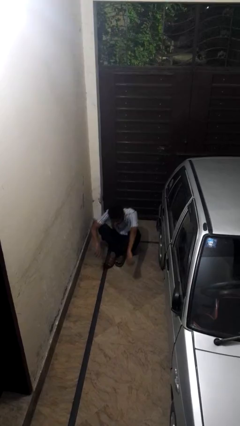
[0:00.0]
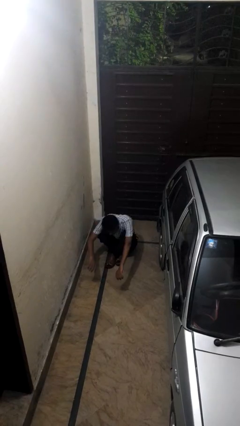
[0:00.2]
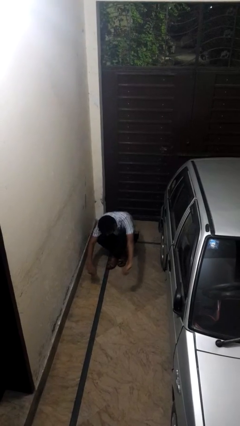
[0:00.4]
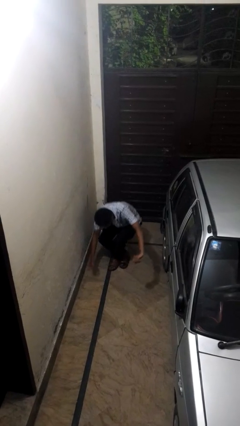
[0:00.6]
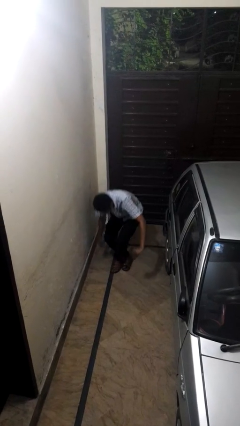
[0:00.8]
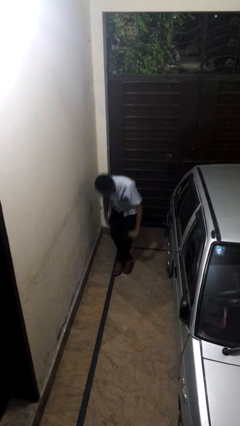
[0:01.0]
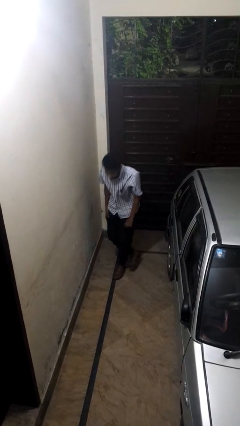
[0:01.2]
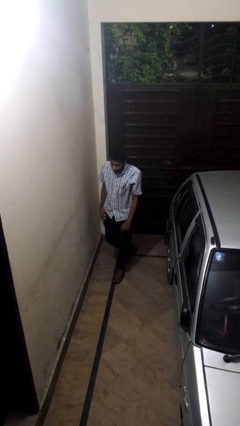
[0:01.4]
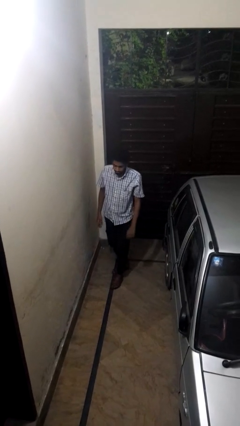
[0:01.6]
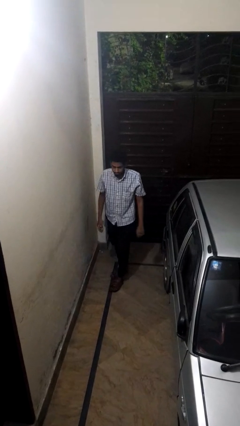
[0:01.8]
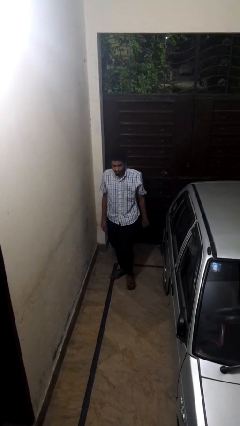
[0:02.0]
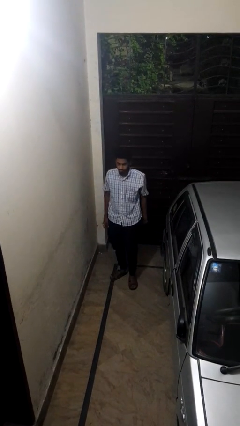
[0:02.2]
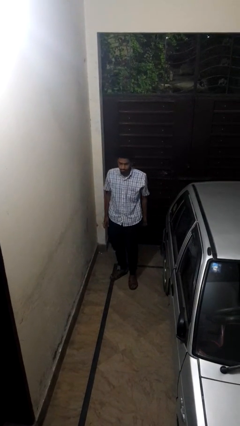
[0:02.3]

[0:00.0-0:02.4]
person stands up from floor

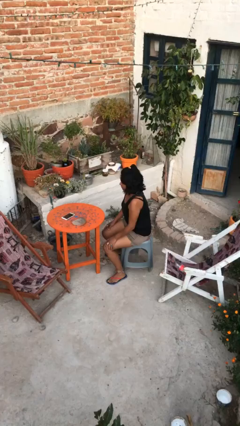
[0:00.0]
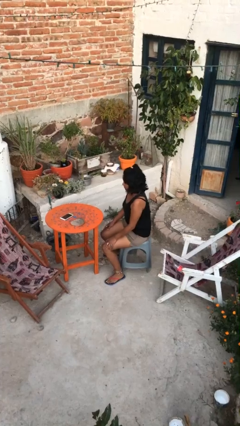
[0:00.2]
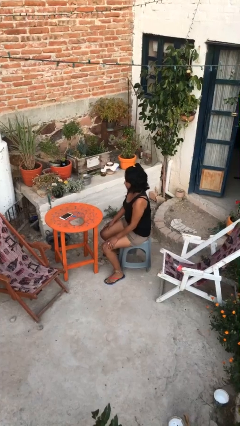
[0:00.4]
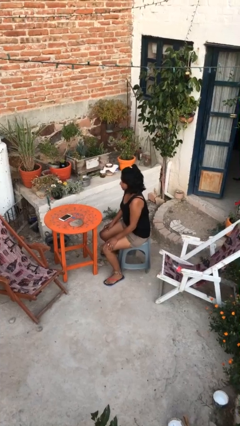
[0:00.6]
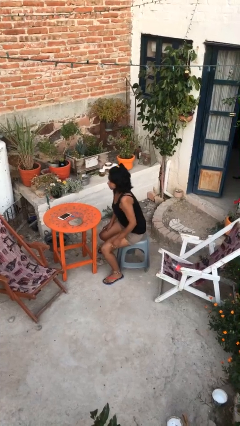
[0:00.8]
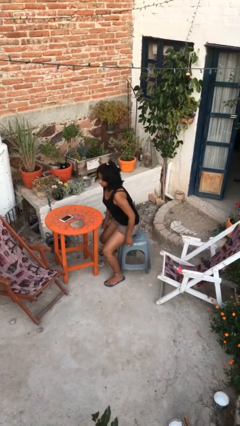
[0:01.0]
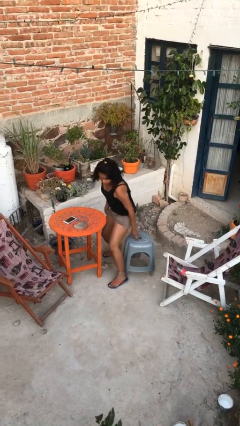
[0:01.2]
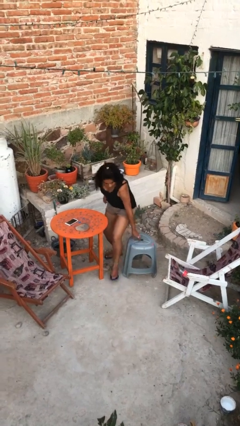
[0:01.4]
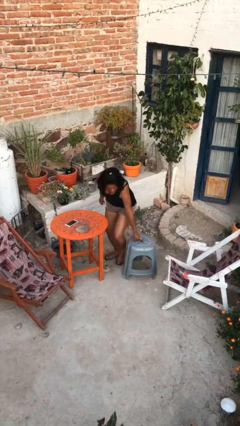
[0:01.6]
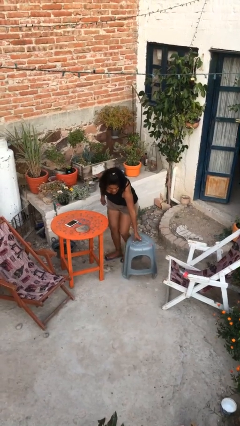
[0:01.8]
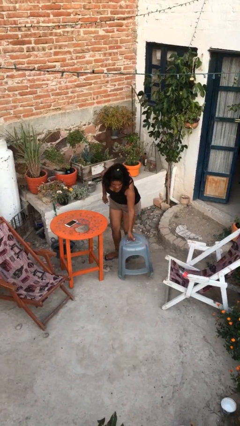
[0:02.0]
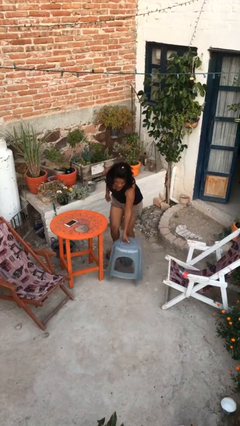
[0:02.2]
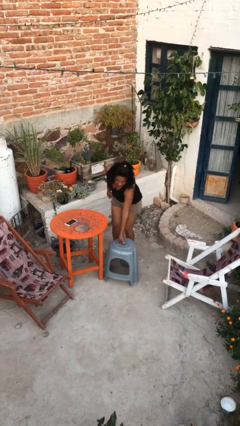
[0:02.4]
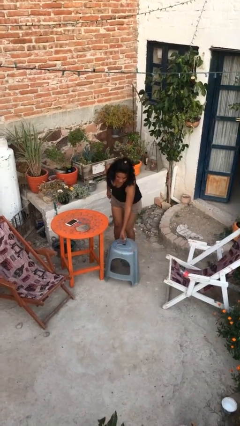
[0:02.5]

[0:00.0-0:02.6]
person stands up

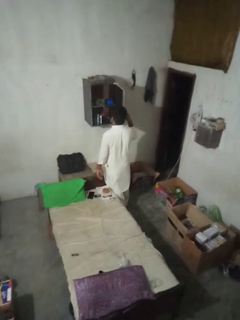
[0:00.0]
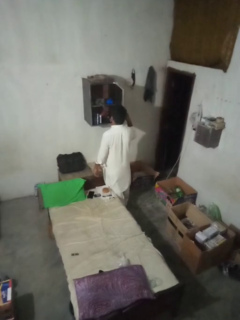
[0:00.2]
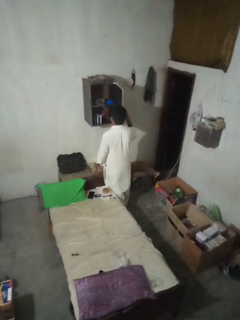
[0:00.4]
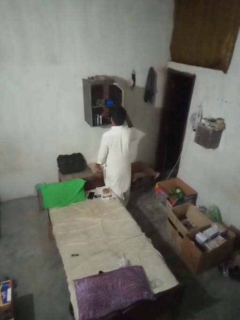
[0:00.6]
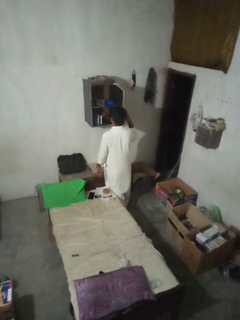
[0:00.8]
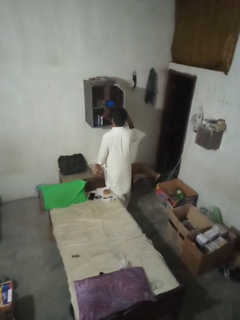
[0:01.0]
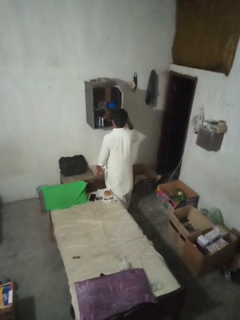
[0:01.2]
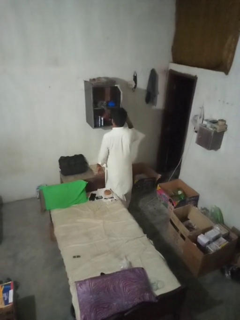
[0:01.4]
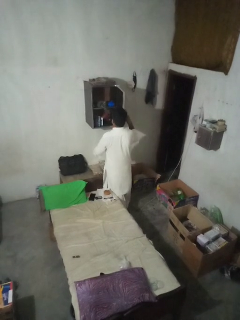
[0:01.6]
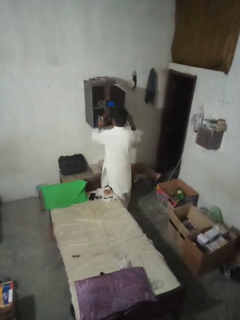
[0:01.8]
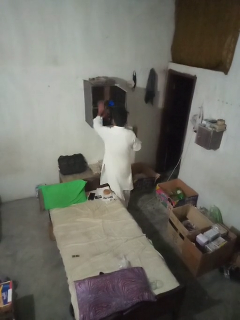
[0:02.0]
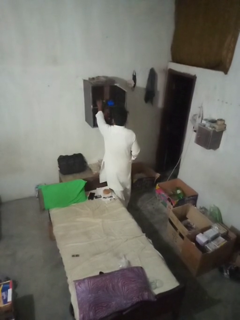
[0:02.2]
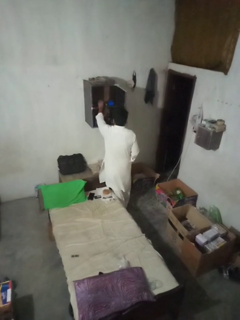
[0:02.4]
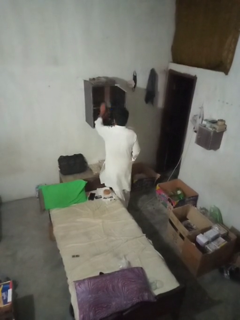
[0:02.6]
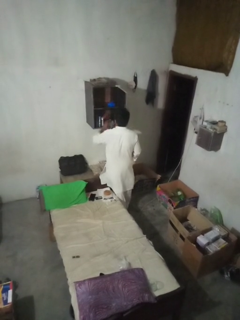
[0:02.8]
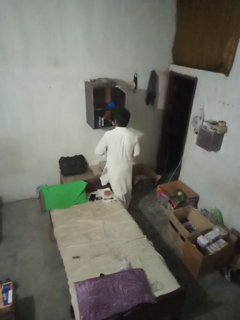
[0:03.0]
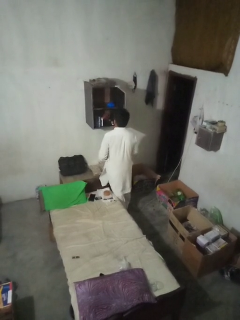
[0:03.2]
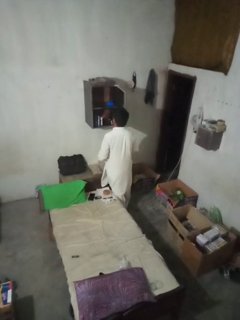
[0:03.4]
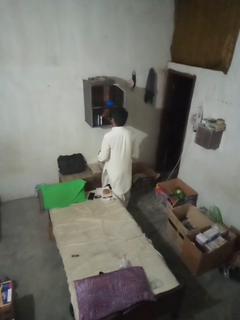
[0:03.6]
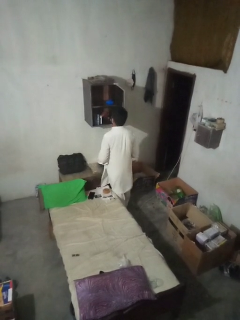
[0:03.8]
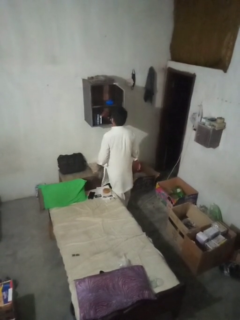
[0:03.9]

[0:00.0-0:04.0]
person takes clothes from dresser

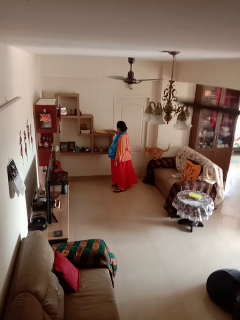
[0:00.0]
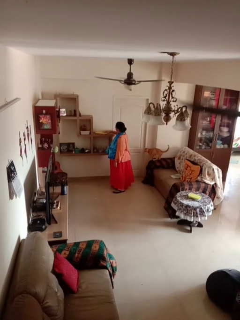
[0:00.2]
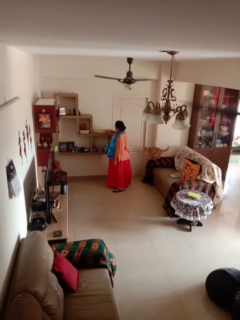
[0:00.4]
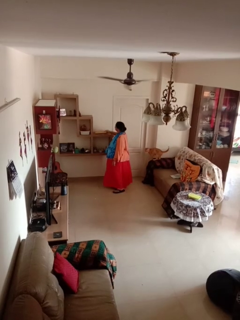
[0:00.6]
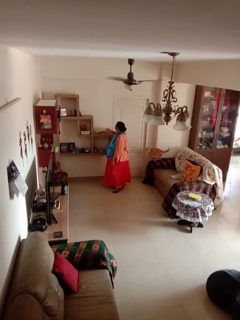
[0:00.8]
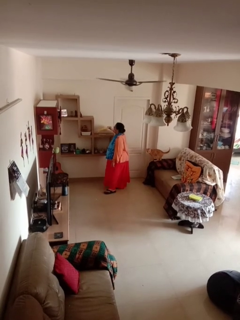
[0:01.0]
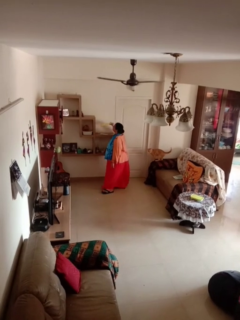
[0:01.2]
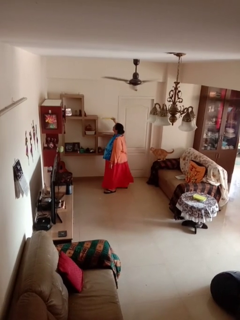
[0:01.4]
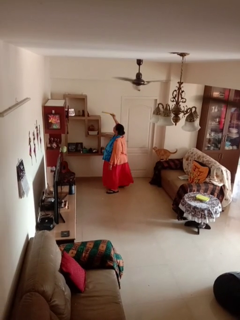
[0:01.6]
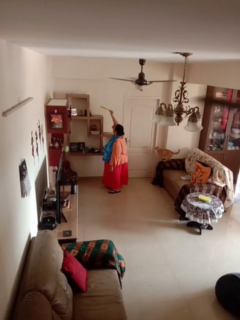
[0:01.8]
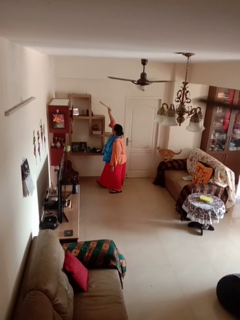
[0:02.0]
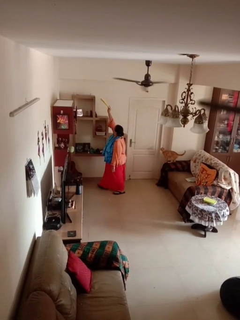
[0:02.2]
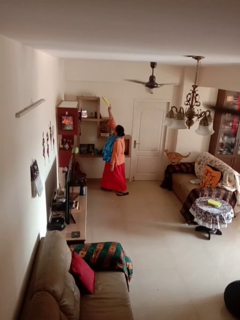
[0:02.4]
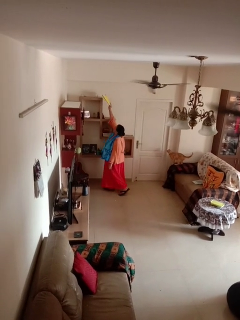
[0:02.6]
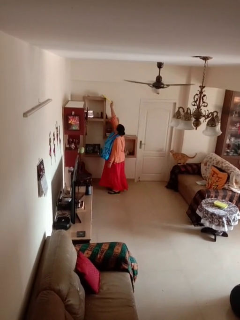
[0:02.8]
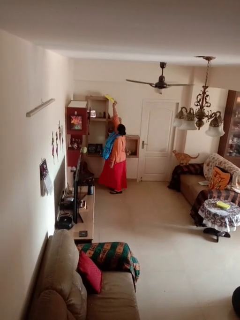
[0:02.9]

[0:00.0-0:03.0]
person picks up object from shelf

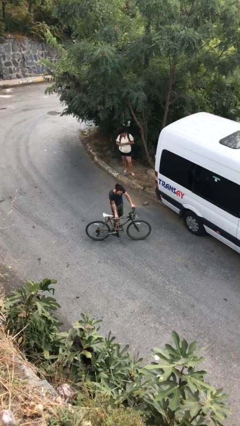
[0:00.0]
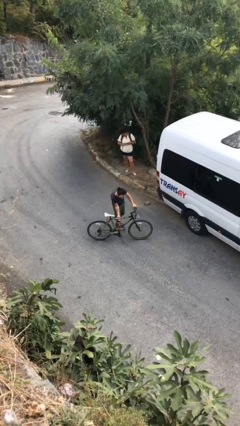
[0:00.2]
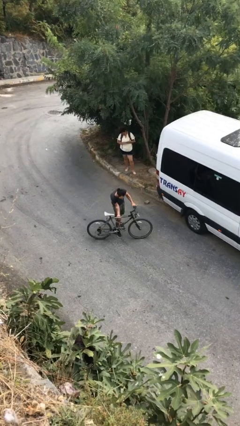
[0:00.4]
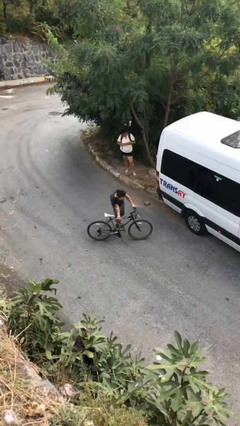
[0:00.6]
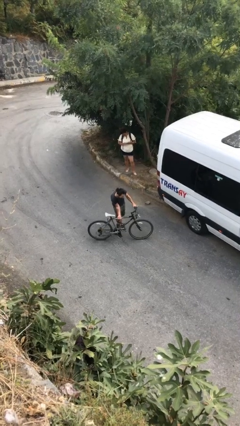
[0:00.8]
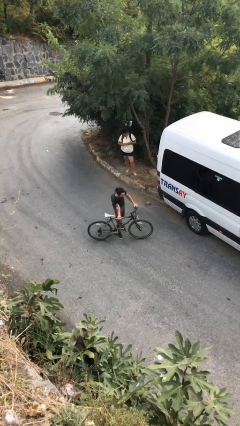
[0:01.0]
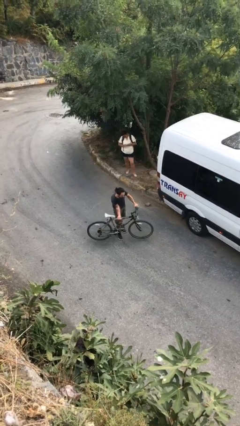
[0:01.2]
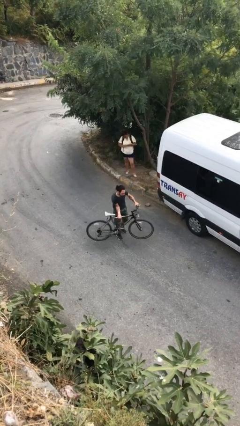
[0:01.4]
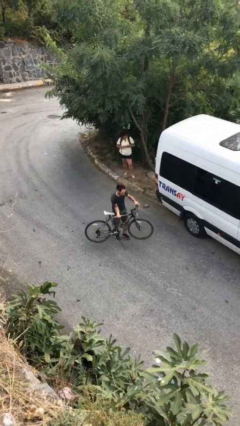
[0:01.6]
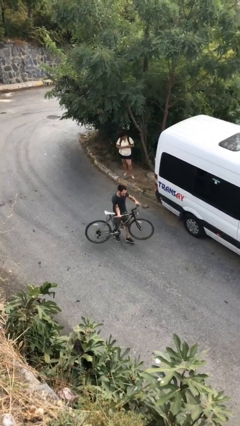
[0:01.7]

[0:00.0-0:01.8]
person picks up object from floor

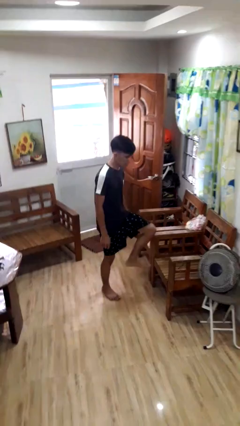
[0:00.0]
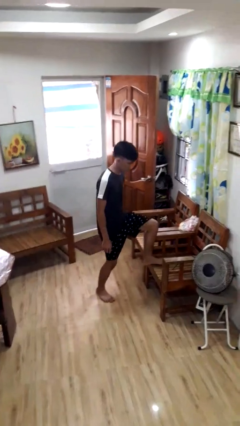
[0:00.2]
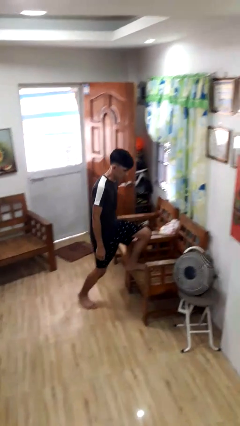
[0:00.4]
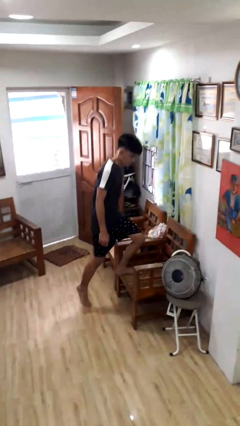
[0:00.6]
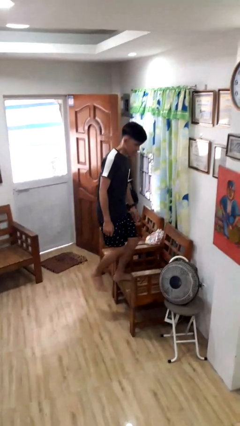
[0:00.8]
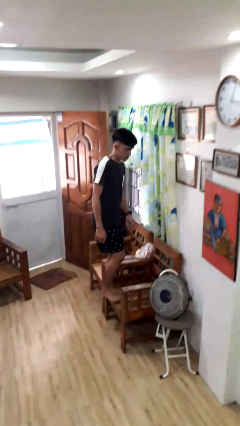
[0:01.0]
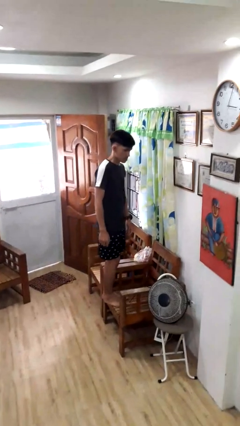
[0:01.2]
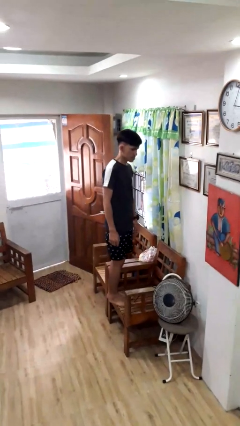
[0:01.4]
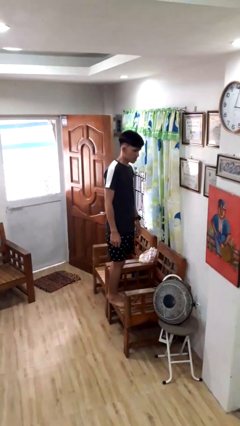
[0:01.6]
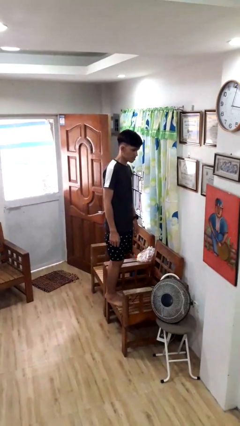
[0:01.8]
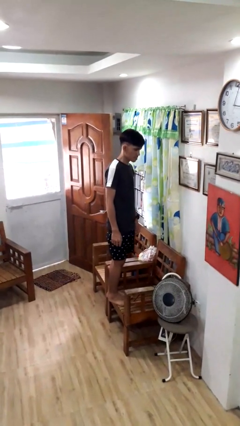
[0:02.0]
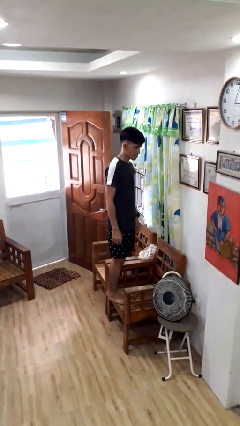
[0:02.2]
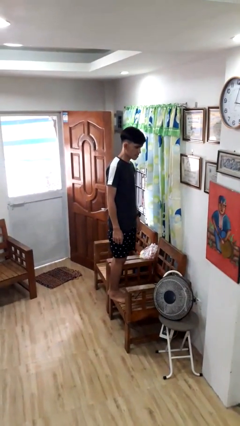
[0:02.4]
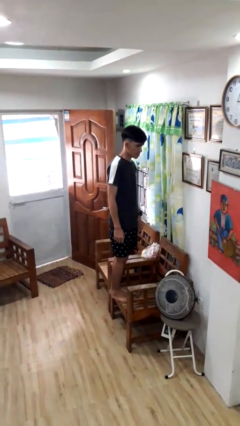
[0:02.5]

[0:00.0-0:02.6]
person climbs on chair

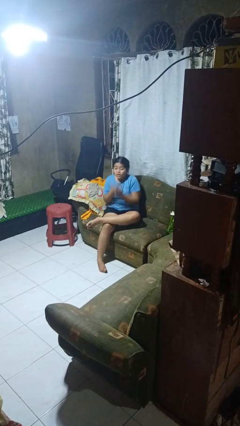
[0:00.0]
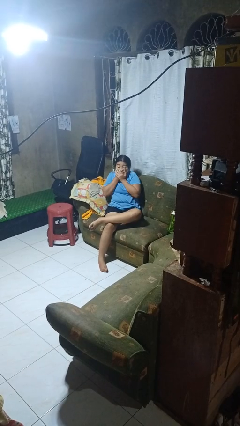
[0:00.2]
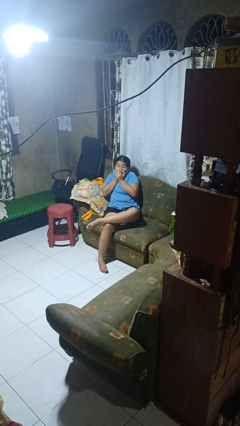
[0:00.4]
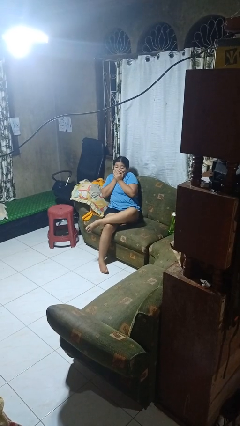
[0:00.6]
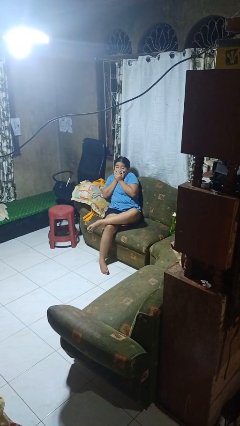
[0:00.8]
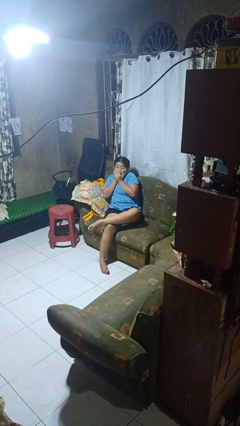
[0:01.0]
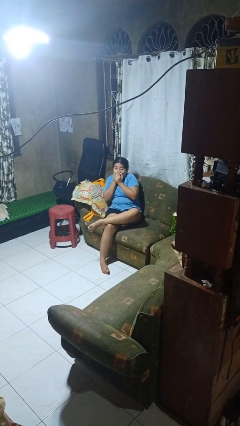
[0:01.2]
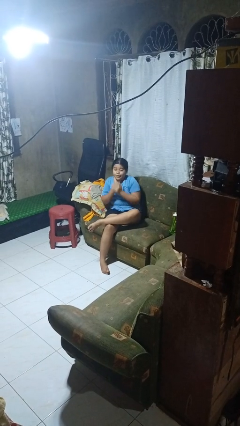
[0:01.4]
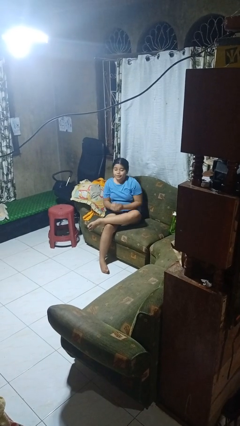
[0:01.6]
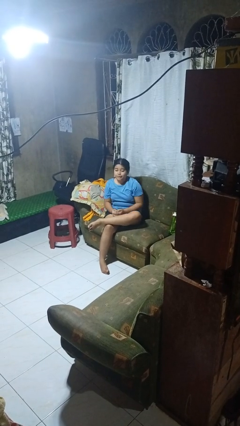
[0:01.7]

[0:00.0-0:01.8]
person covers face with hands

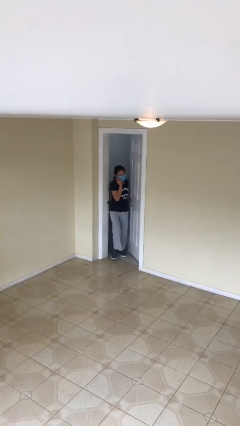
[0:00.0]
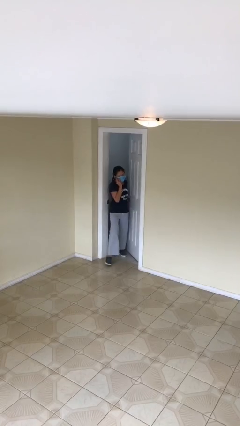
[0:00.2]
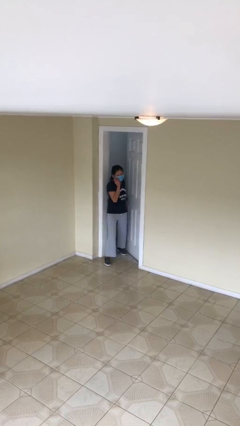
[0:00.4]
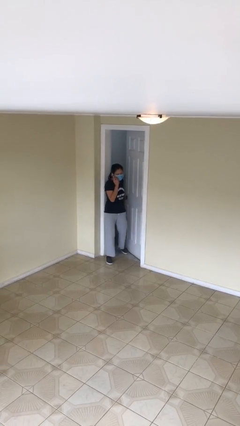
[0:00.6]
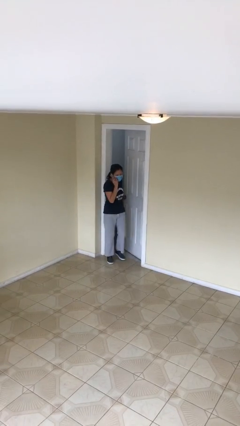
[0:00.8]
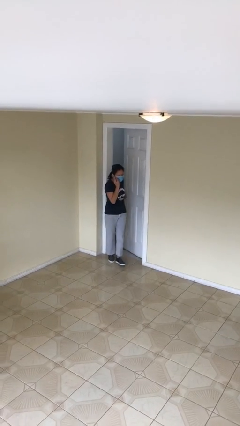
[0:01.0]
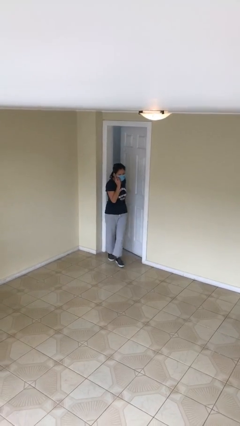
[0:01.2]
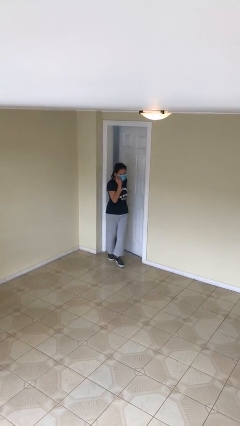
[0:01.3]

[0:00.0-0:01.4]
person enters scene through structure
